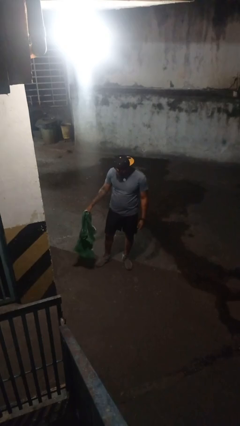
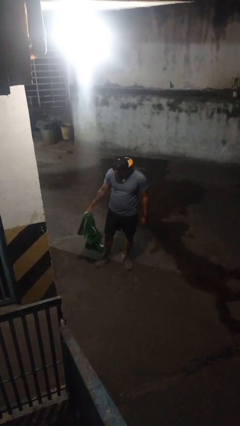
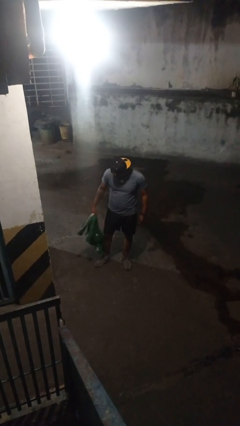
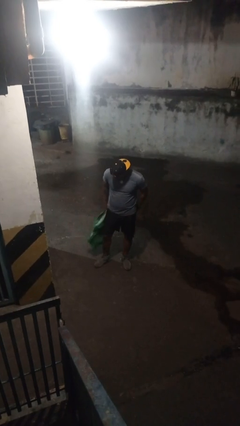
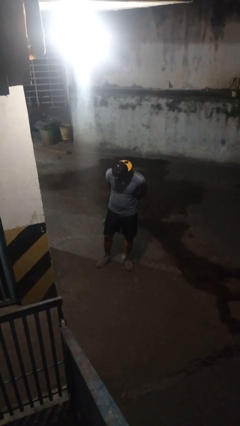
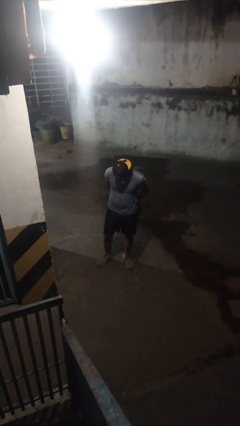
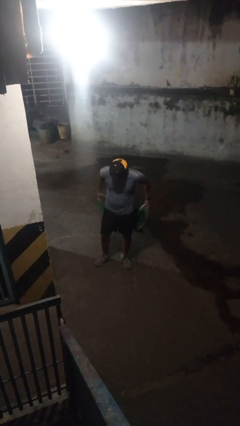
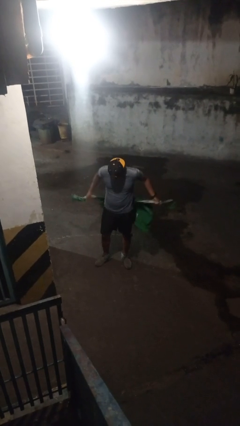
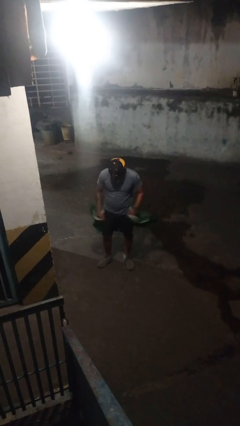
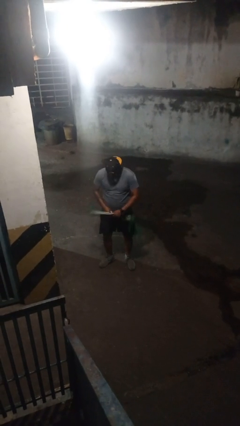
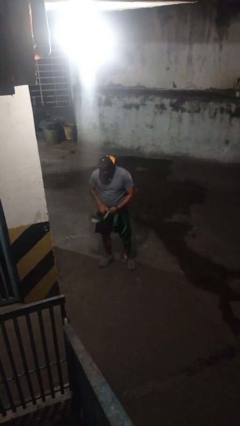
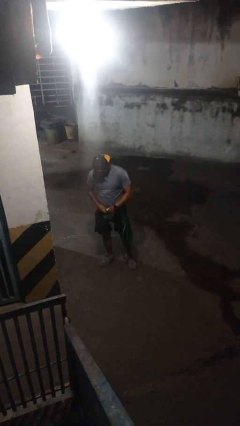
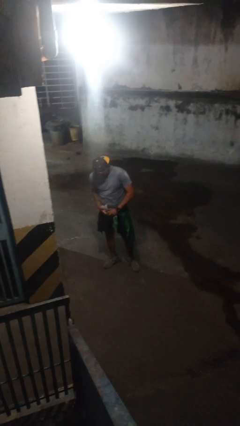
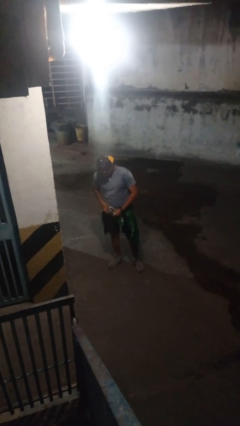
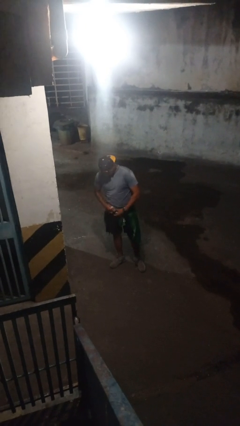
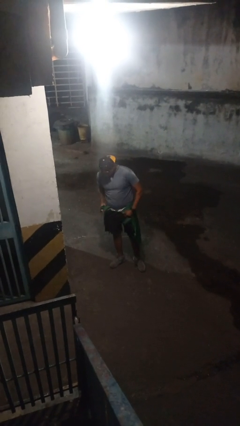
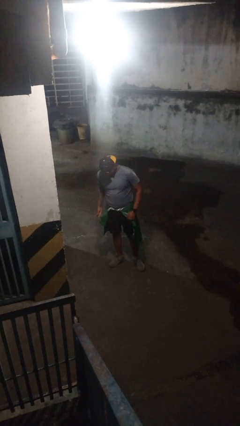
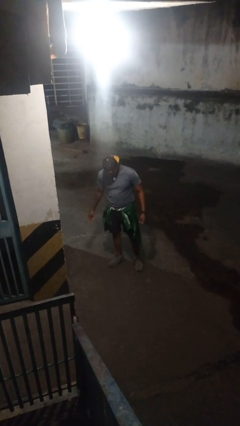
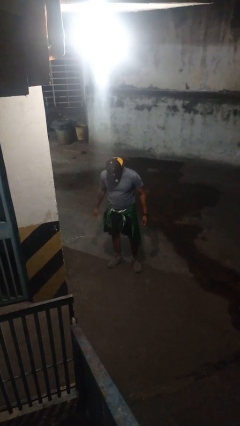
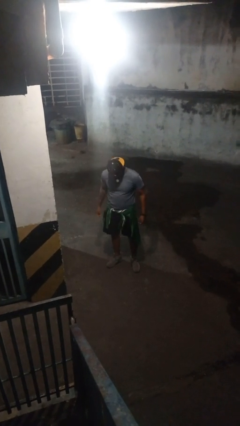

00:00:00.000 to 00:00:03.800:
person ties jacket around waist

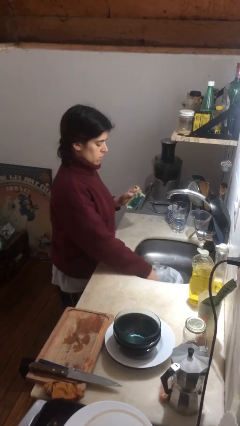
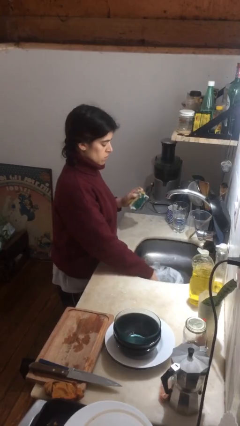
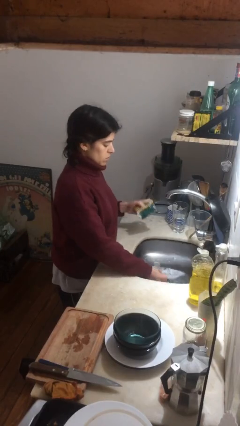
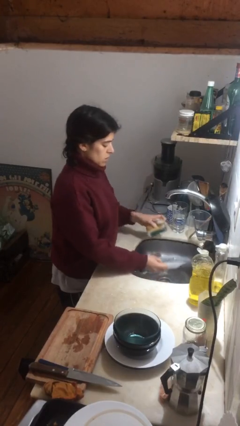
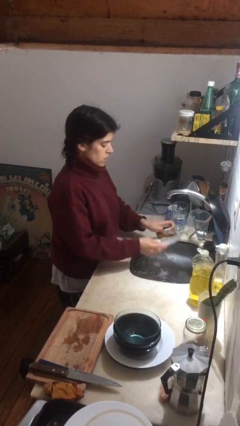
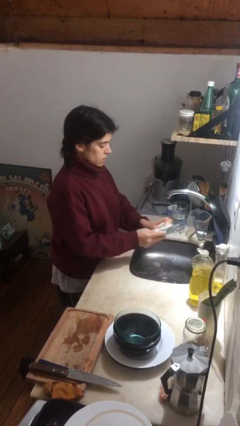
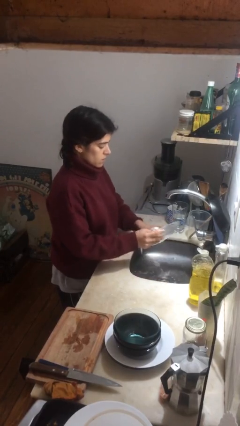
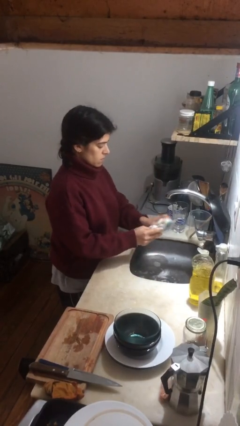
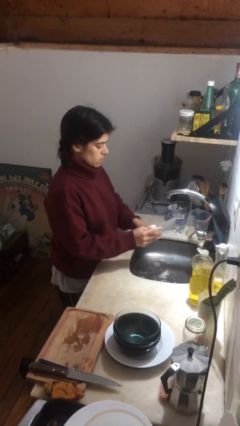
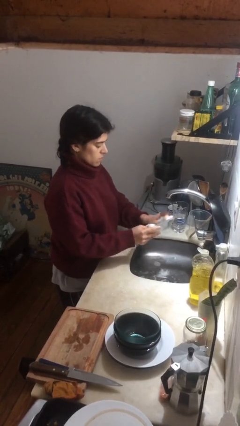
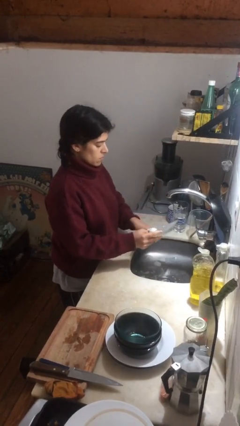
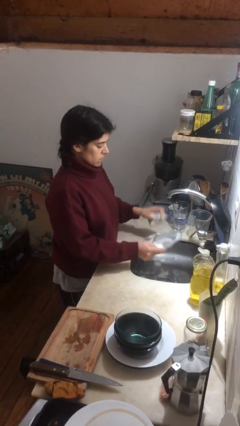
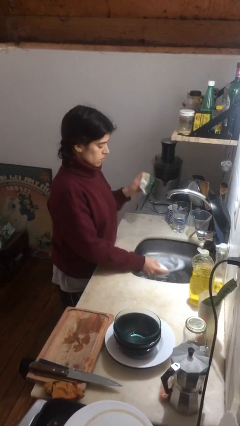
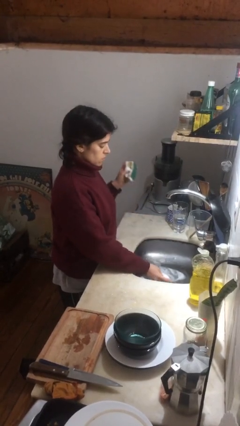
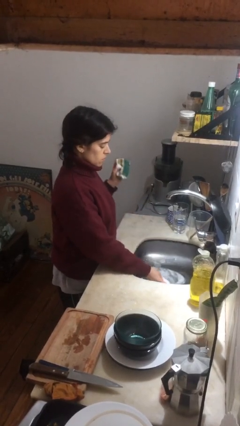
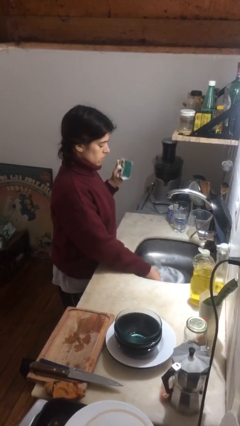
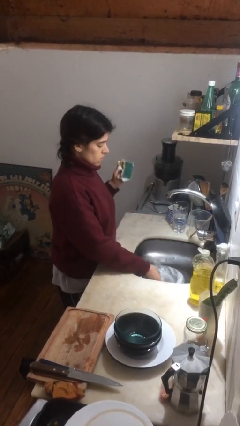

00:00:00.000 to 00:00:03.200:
person washes dish

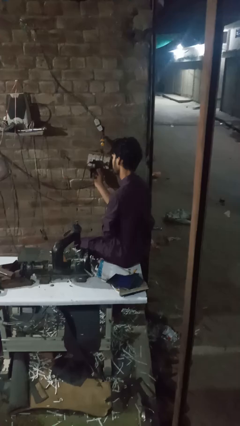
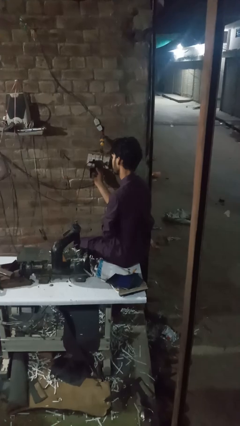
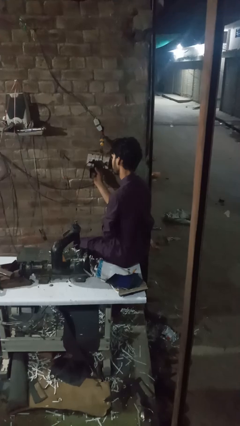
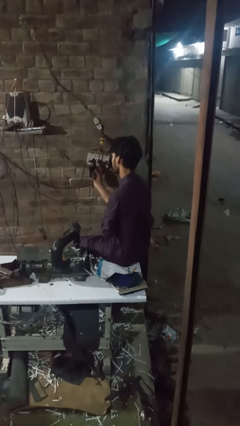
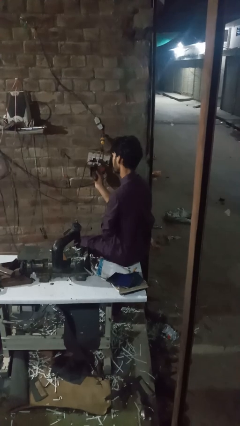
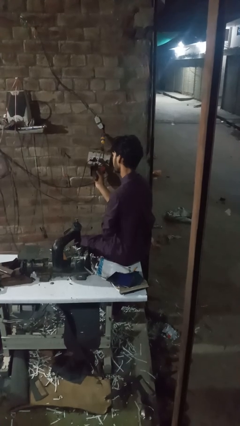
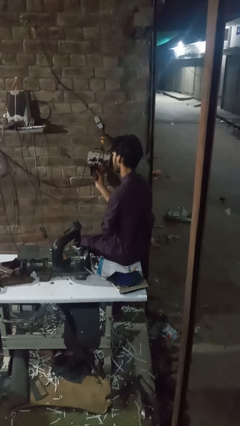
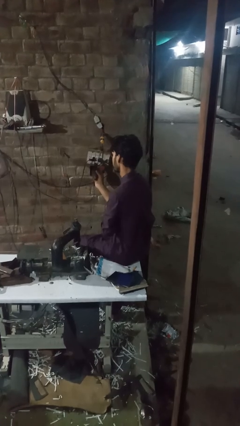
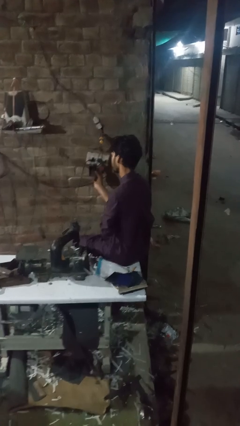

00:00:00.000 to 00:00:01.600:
person unplugs from electrical socket

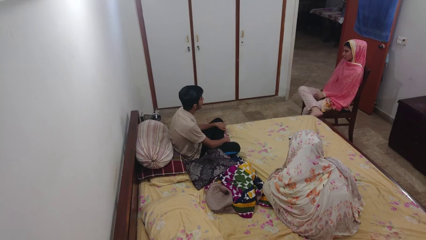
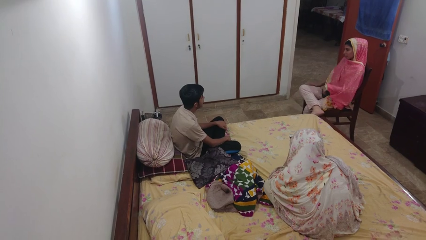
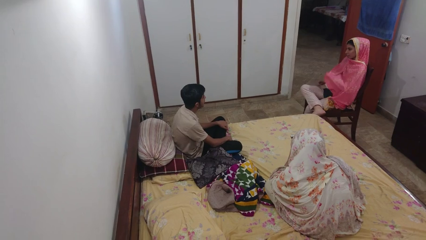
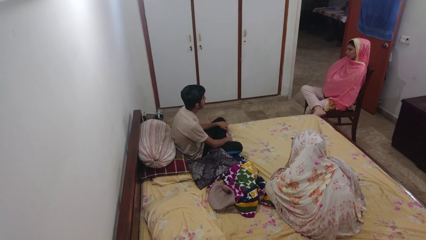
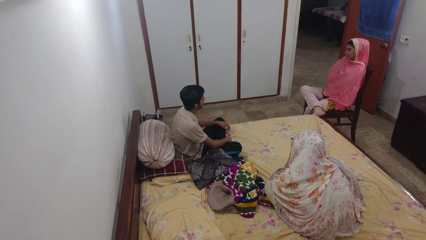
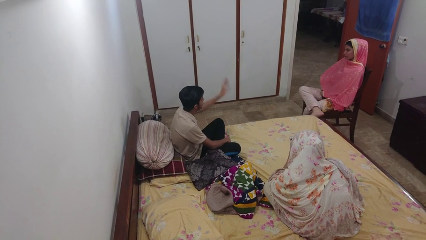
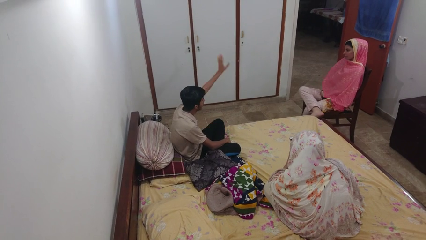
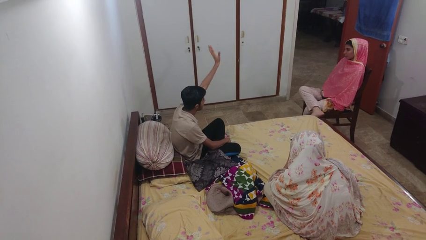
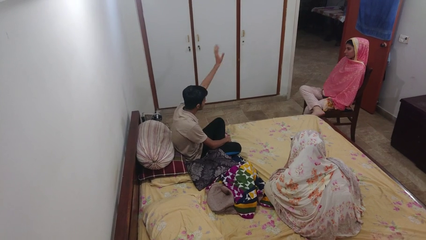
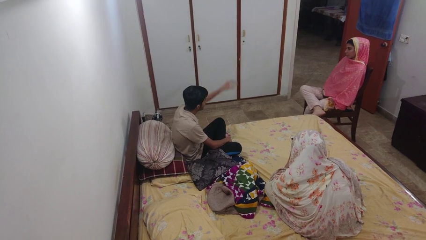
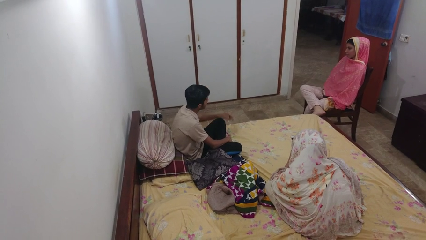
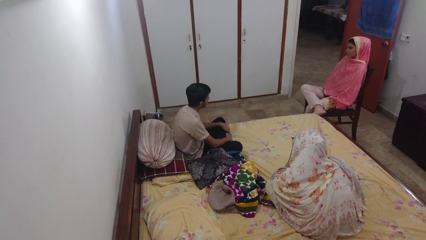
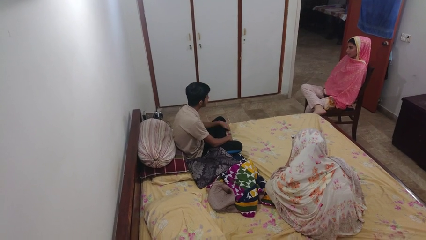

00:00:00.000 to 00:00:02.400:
person waves at person

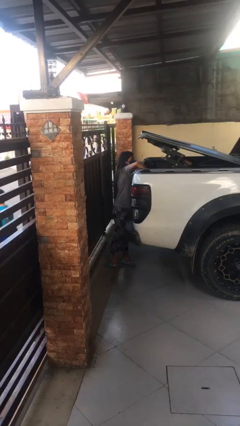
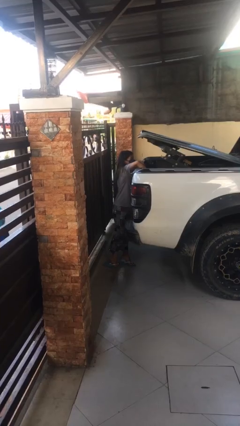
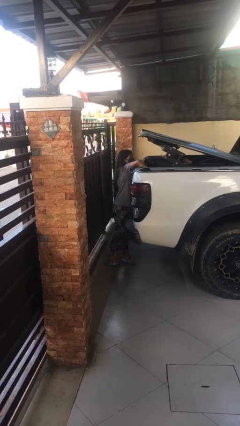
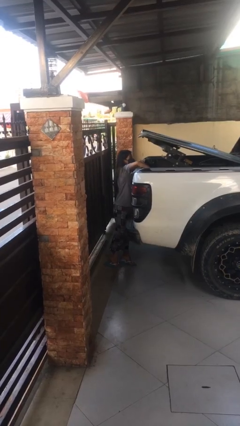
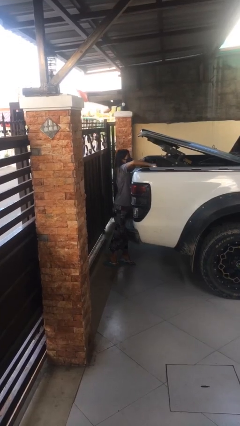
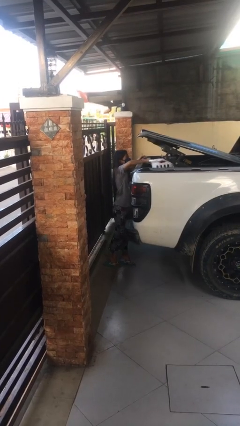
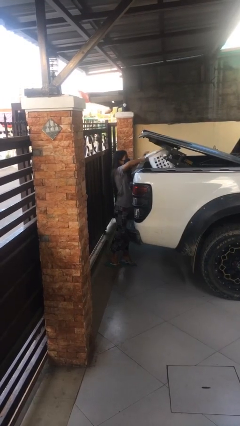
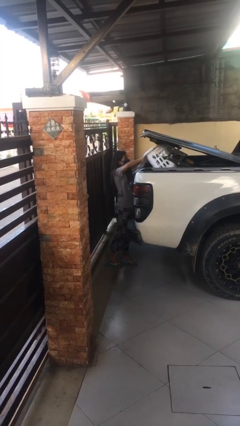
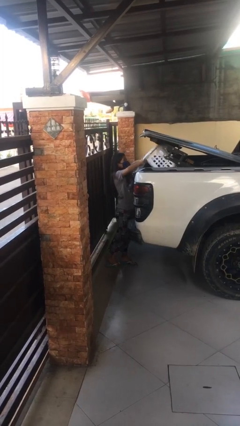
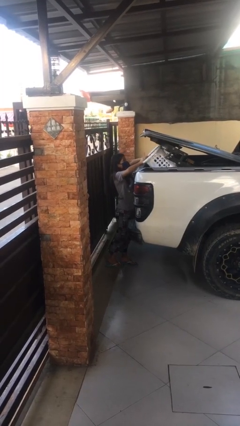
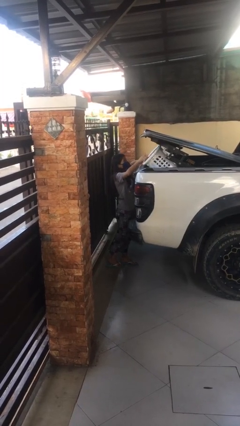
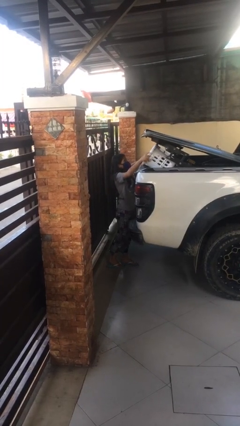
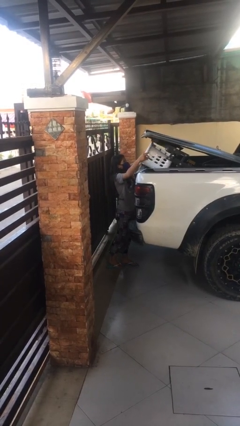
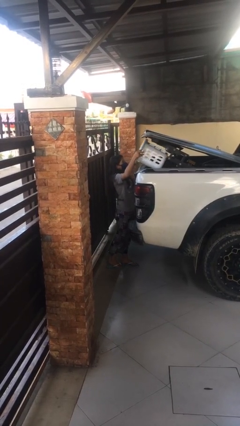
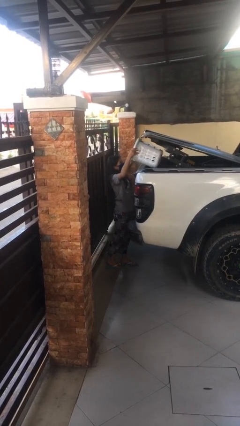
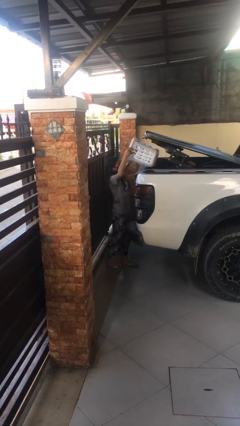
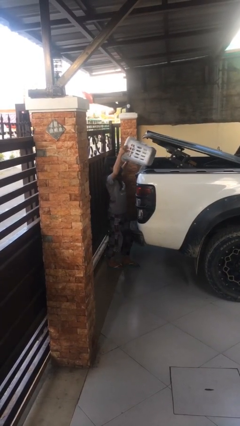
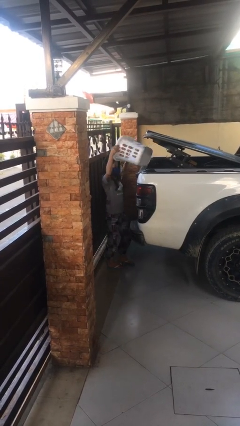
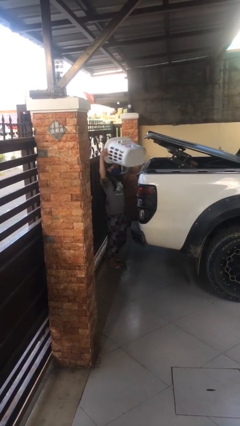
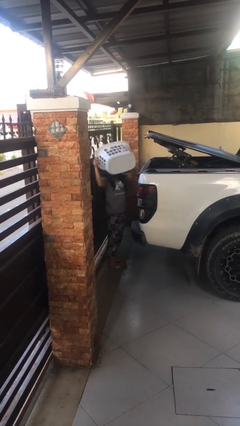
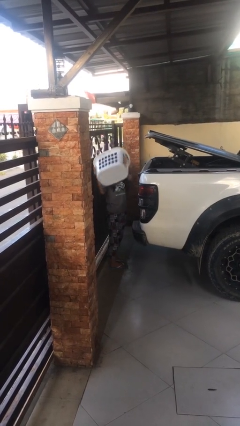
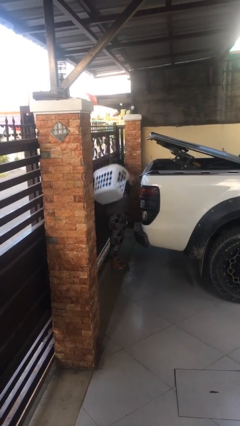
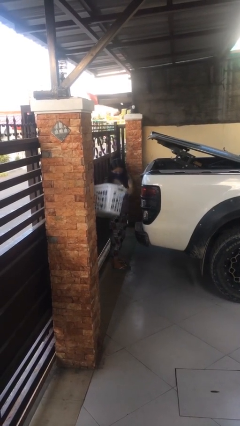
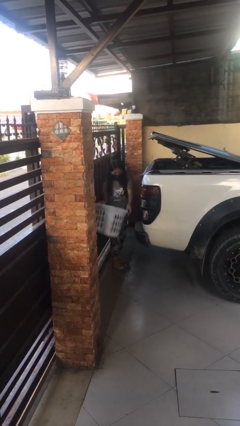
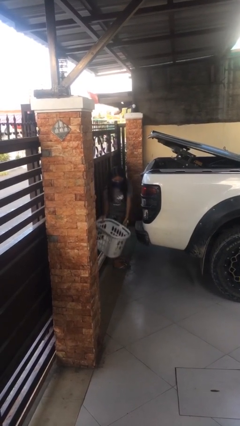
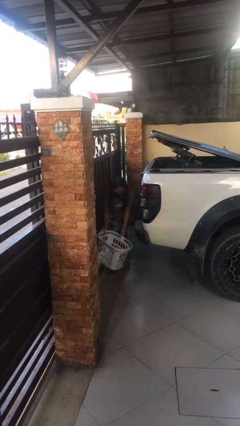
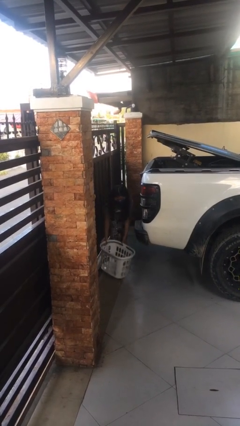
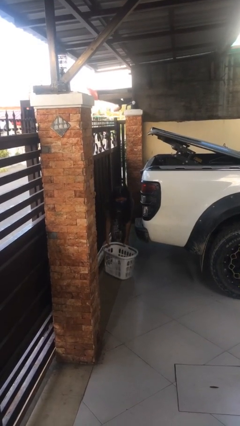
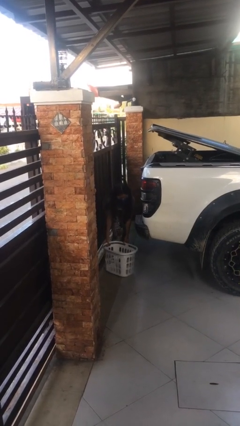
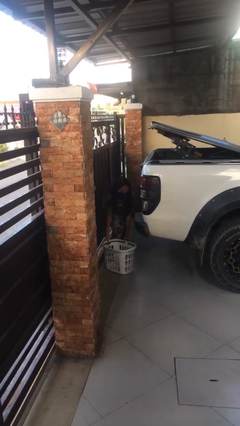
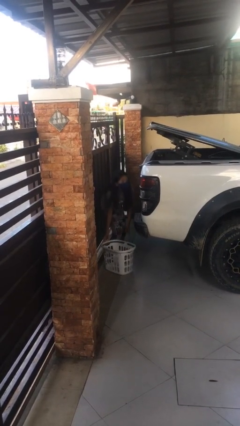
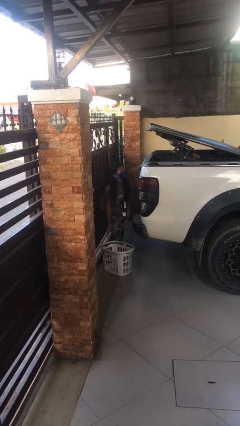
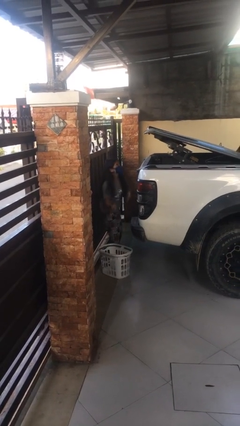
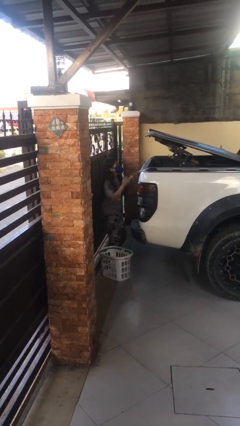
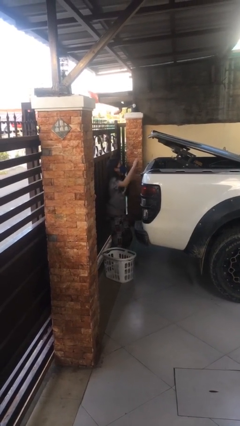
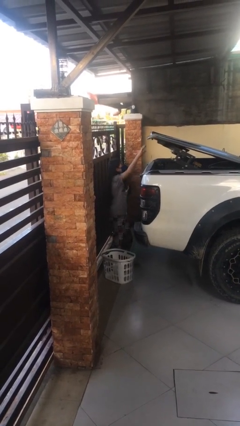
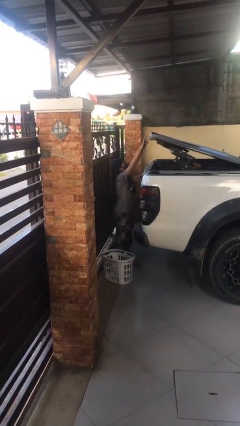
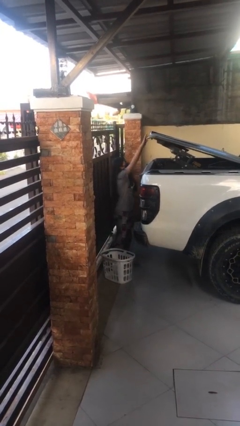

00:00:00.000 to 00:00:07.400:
person unloads car
